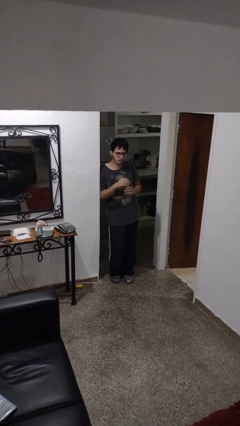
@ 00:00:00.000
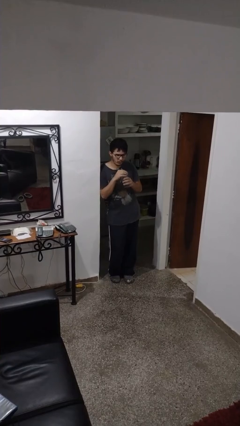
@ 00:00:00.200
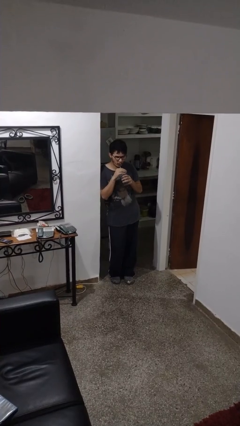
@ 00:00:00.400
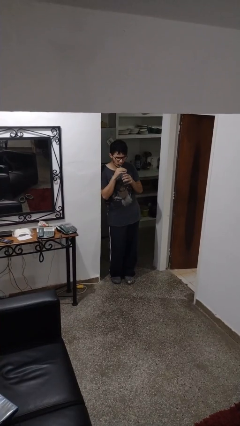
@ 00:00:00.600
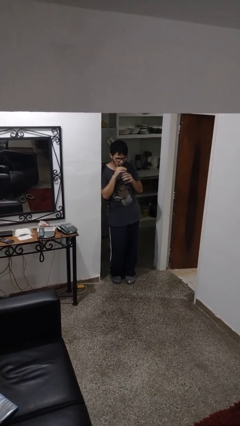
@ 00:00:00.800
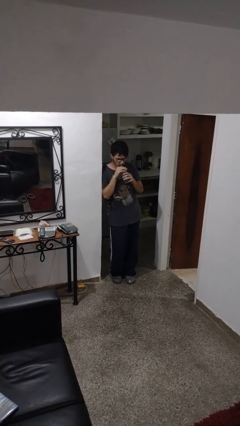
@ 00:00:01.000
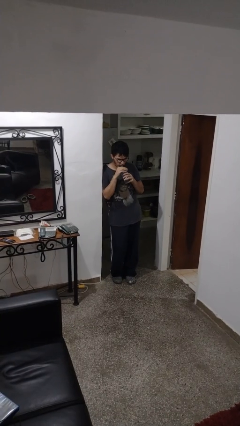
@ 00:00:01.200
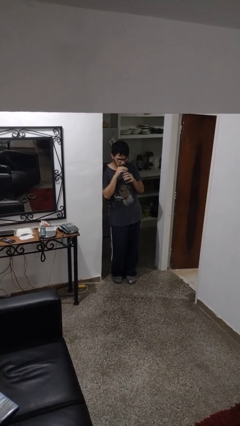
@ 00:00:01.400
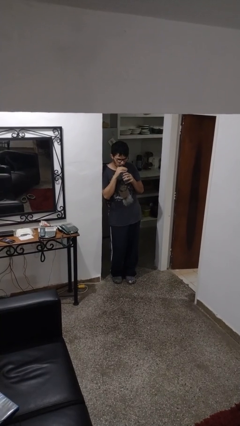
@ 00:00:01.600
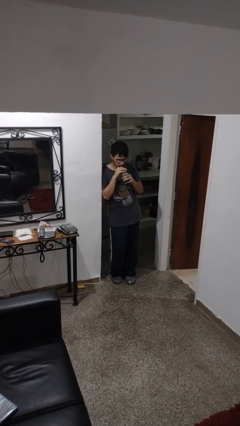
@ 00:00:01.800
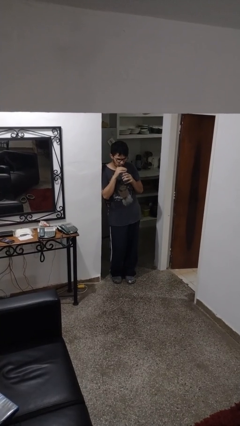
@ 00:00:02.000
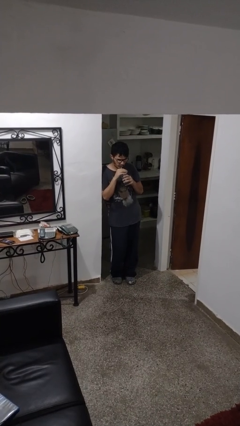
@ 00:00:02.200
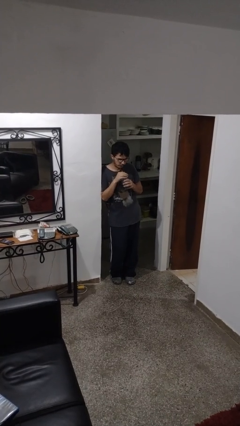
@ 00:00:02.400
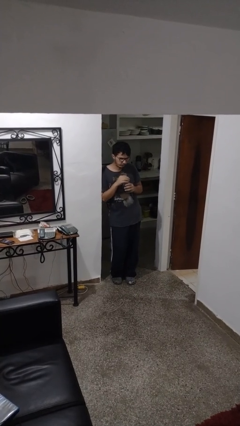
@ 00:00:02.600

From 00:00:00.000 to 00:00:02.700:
person drinks from straw

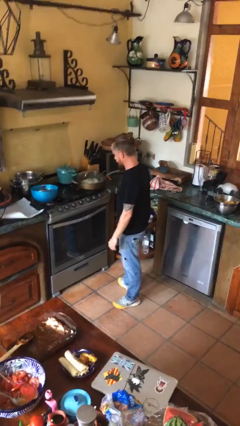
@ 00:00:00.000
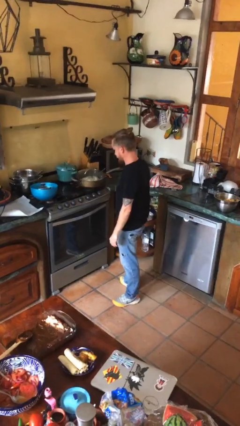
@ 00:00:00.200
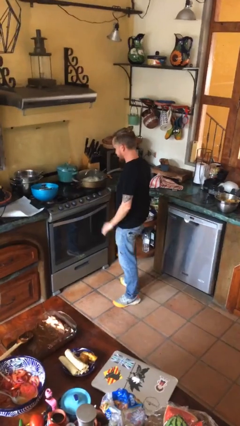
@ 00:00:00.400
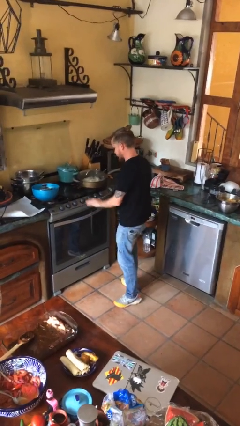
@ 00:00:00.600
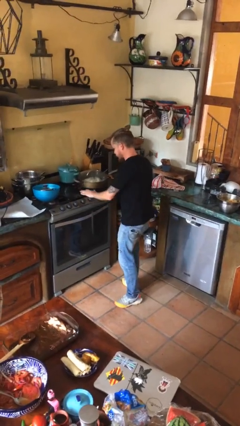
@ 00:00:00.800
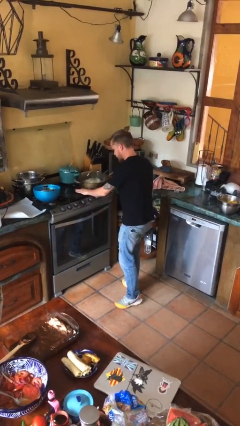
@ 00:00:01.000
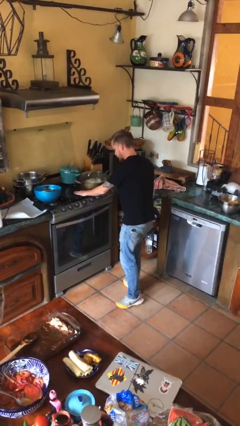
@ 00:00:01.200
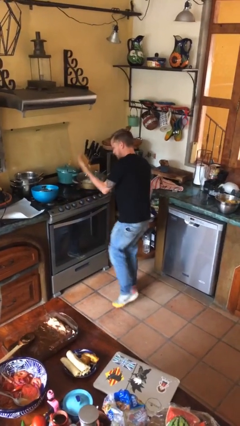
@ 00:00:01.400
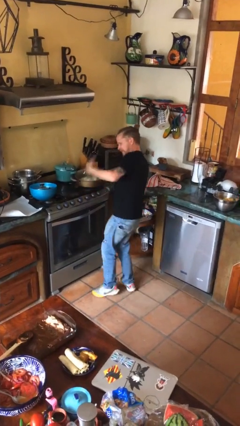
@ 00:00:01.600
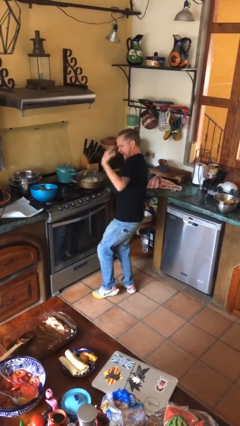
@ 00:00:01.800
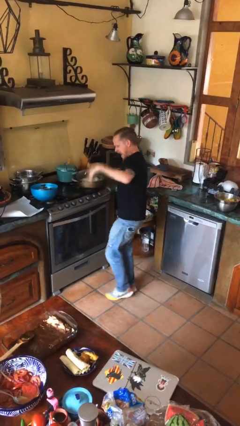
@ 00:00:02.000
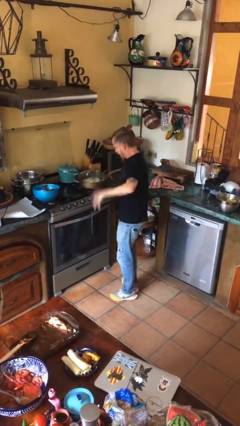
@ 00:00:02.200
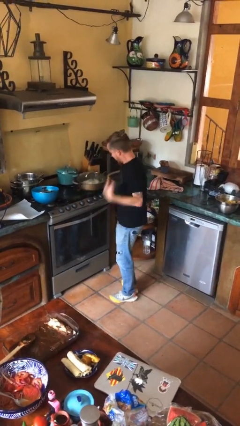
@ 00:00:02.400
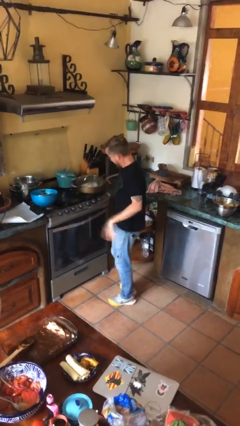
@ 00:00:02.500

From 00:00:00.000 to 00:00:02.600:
person burns hand

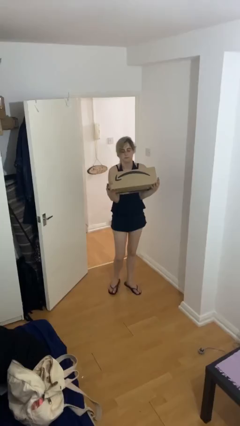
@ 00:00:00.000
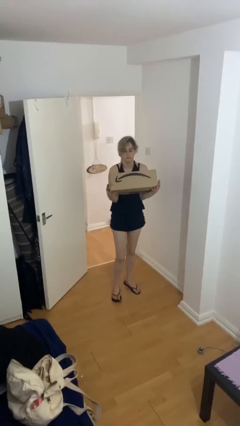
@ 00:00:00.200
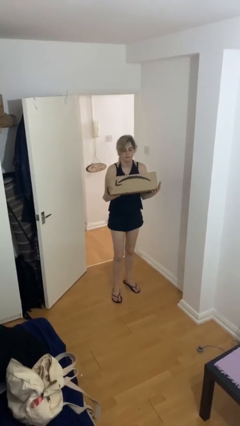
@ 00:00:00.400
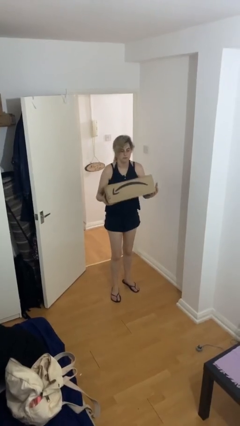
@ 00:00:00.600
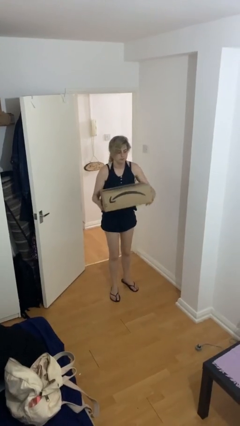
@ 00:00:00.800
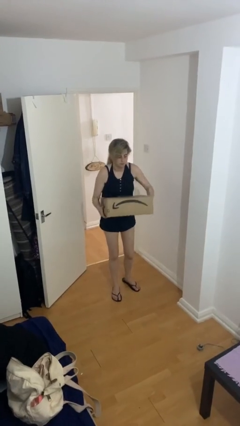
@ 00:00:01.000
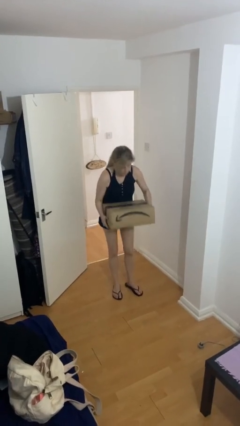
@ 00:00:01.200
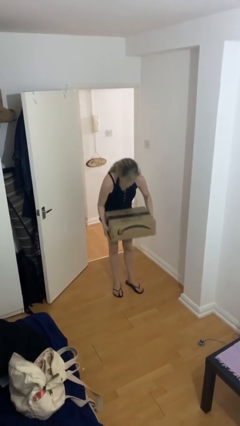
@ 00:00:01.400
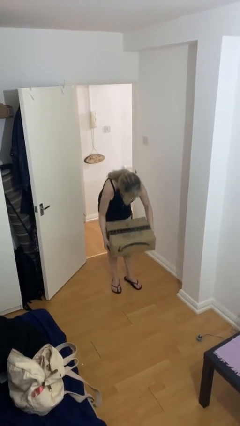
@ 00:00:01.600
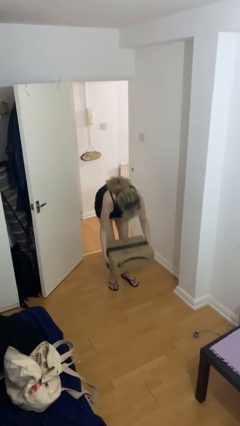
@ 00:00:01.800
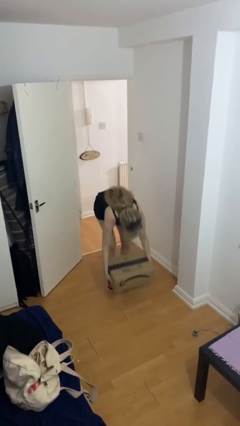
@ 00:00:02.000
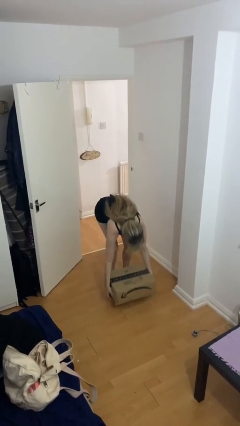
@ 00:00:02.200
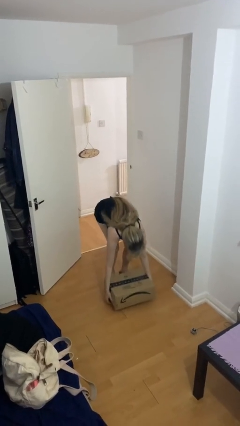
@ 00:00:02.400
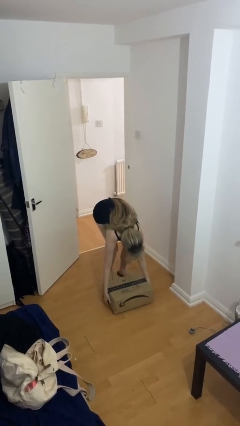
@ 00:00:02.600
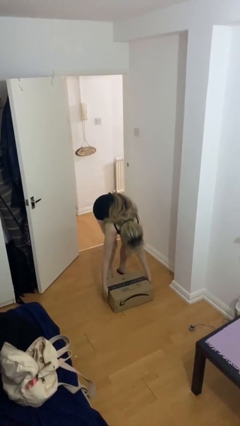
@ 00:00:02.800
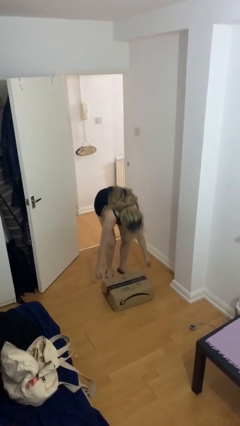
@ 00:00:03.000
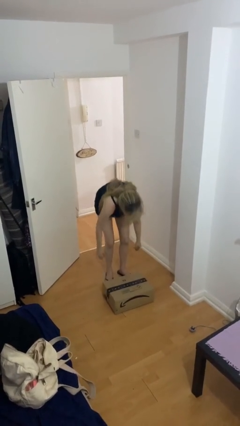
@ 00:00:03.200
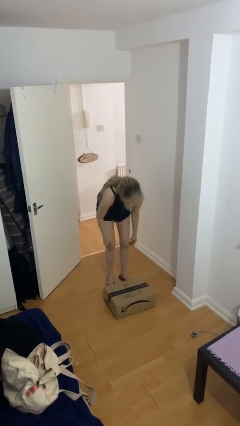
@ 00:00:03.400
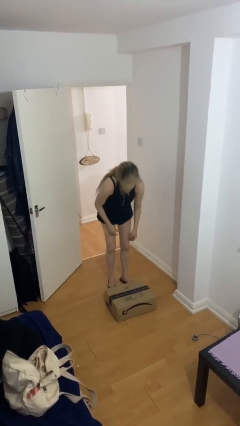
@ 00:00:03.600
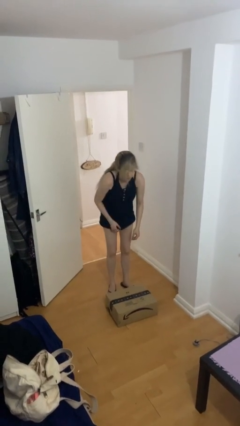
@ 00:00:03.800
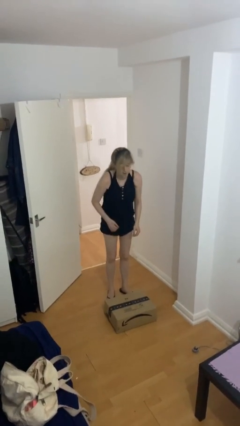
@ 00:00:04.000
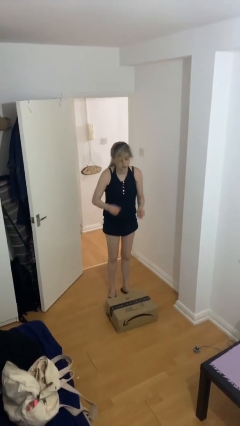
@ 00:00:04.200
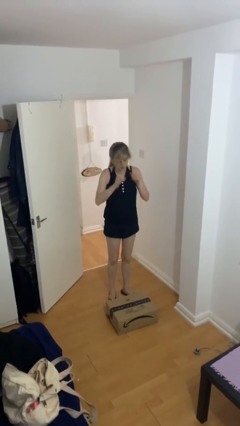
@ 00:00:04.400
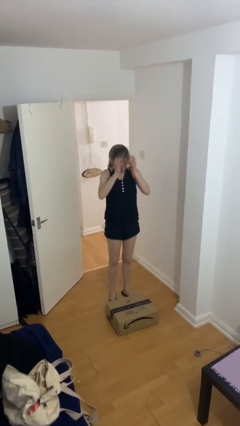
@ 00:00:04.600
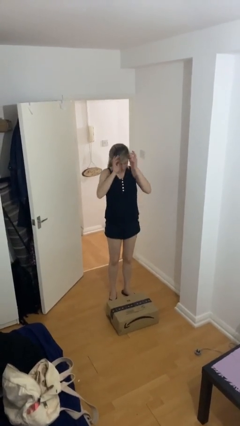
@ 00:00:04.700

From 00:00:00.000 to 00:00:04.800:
person puts down object on floor

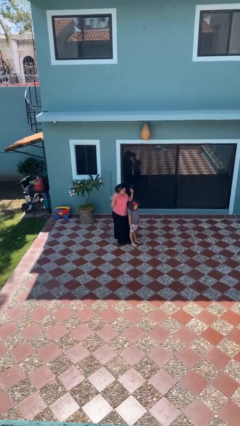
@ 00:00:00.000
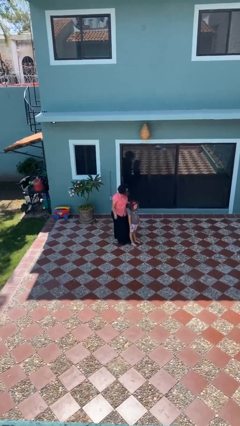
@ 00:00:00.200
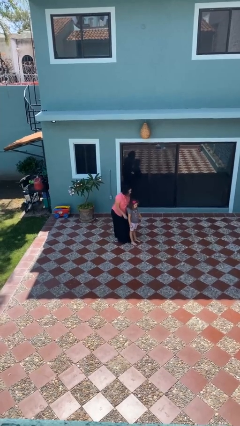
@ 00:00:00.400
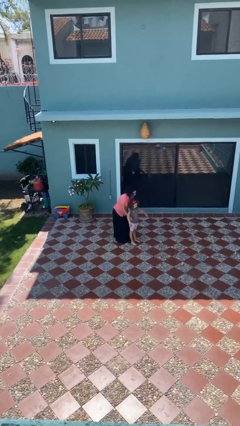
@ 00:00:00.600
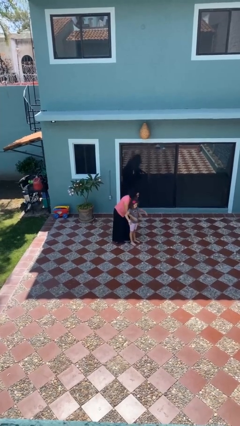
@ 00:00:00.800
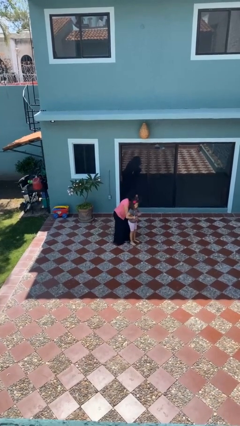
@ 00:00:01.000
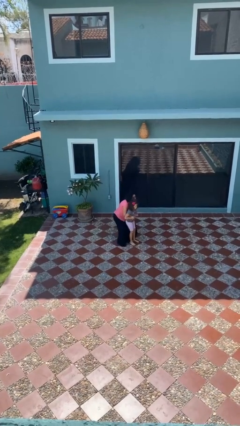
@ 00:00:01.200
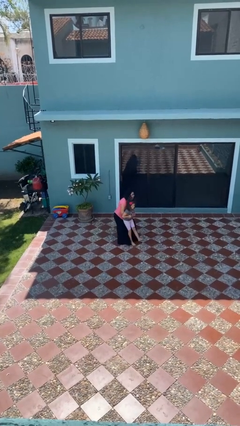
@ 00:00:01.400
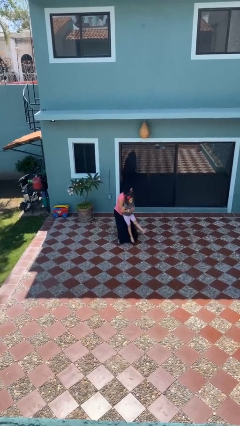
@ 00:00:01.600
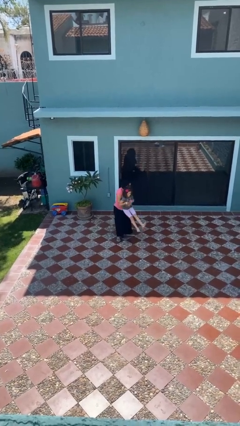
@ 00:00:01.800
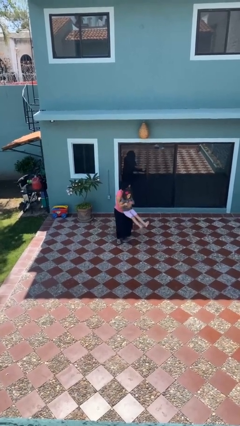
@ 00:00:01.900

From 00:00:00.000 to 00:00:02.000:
person picks up person

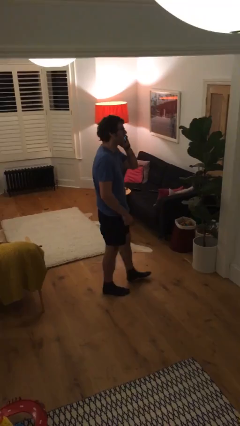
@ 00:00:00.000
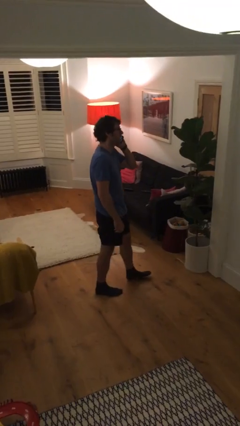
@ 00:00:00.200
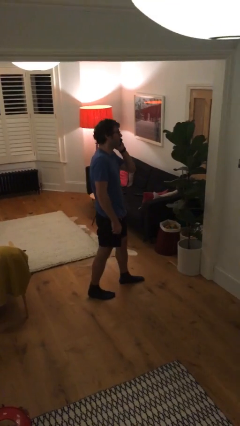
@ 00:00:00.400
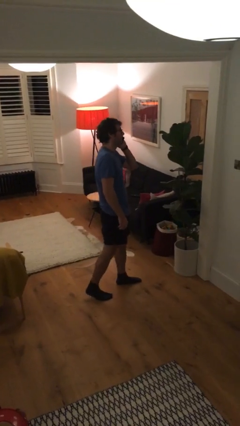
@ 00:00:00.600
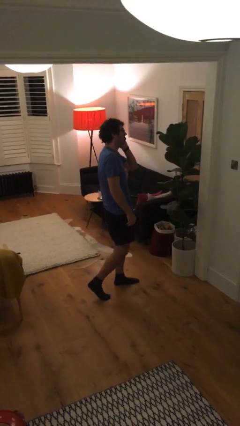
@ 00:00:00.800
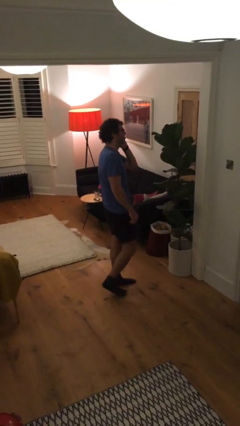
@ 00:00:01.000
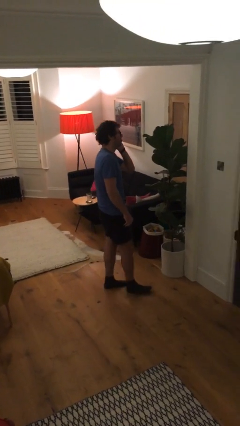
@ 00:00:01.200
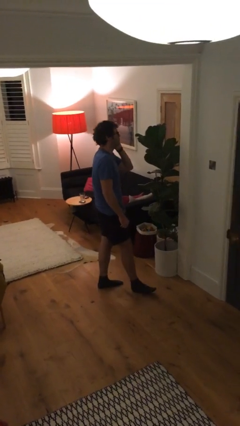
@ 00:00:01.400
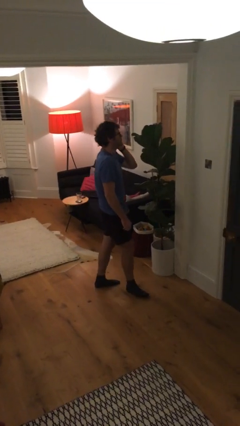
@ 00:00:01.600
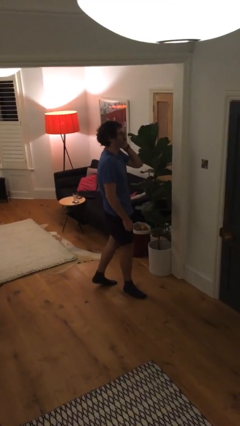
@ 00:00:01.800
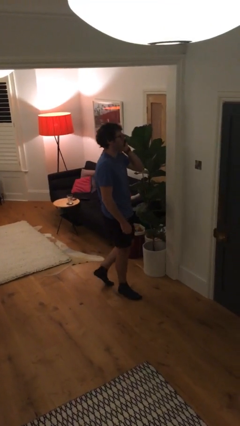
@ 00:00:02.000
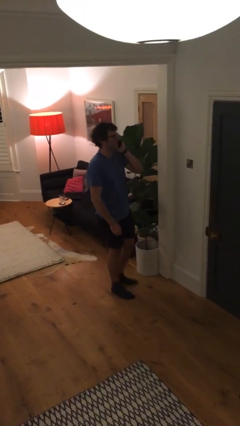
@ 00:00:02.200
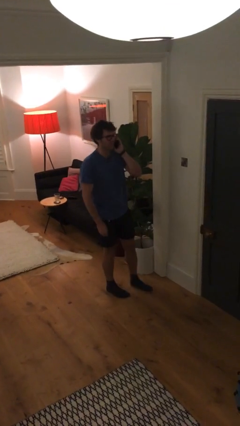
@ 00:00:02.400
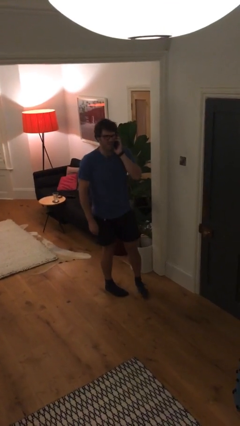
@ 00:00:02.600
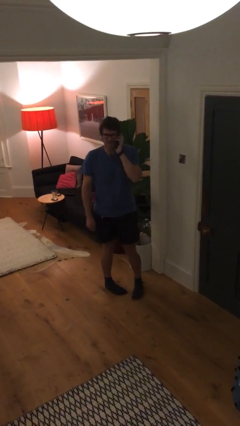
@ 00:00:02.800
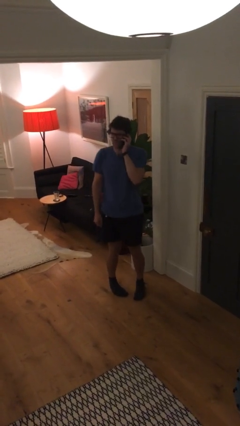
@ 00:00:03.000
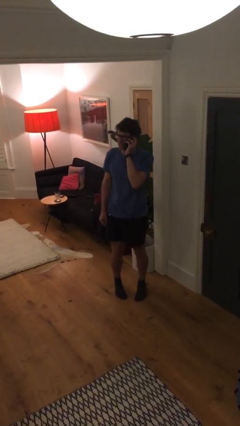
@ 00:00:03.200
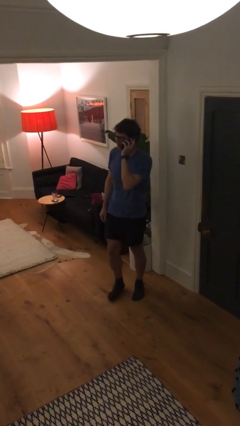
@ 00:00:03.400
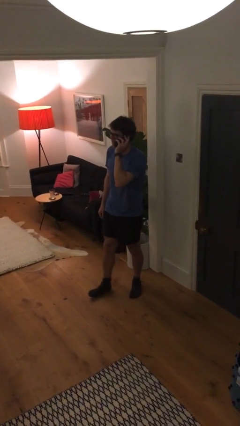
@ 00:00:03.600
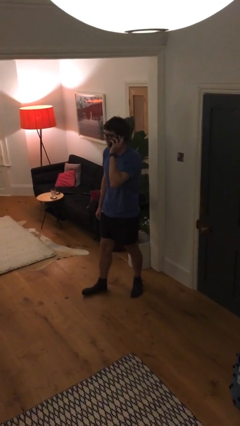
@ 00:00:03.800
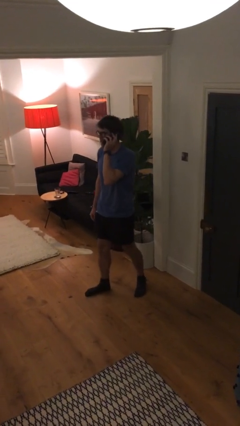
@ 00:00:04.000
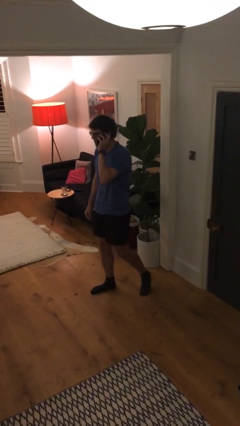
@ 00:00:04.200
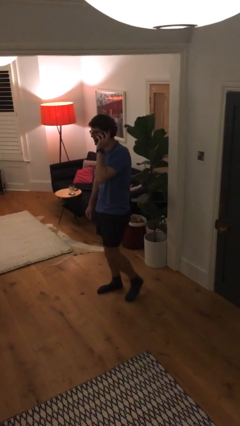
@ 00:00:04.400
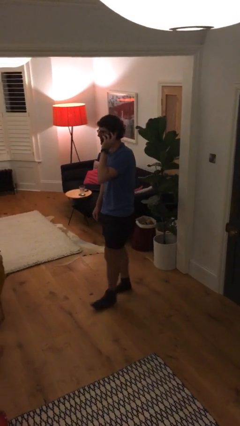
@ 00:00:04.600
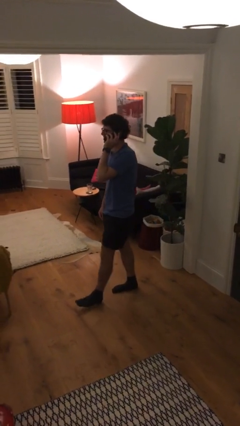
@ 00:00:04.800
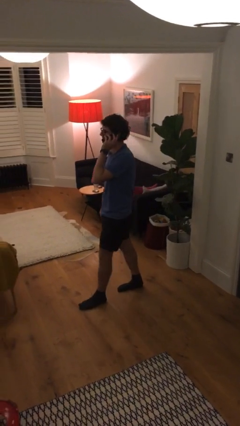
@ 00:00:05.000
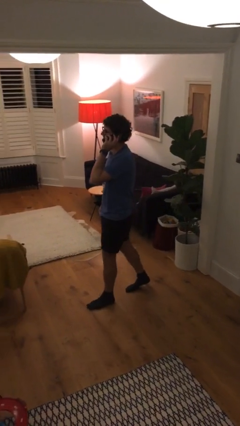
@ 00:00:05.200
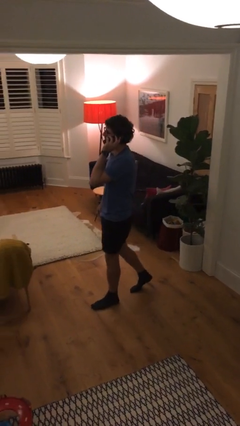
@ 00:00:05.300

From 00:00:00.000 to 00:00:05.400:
person talks on phone
